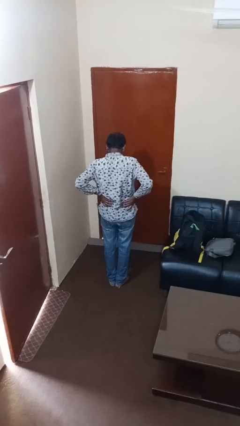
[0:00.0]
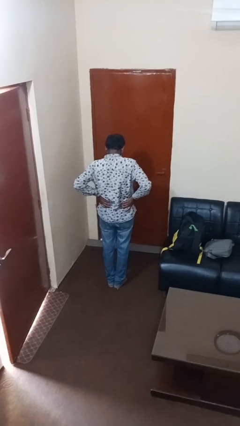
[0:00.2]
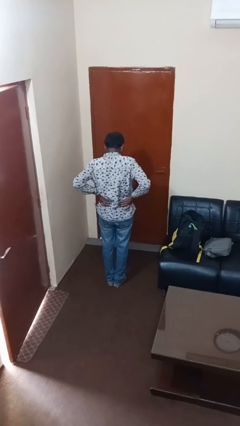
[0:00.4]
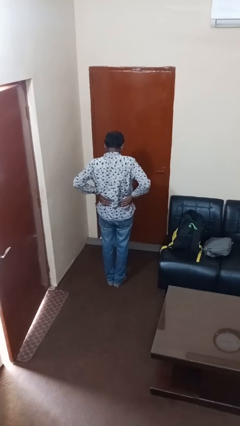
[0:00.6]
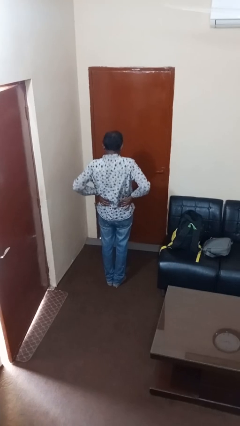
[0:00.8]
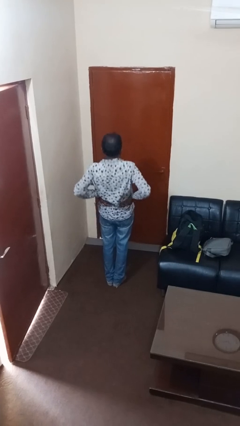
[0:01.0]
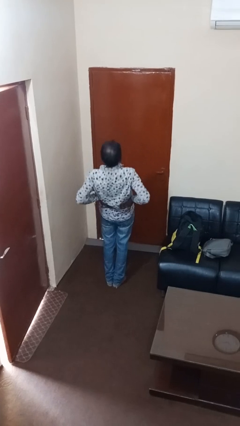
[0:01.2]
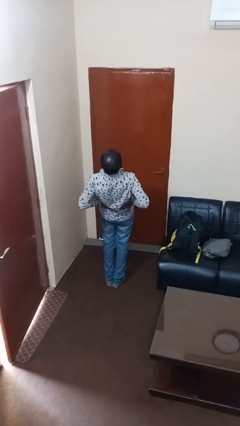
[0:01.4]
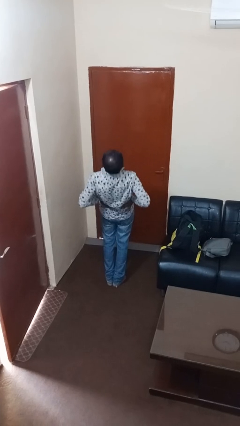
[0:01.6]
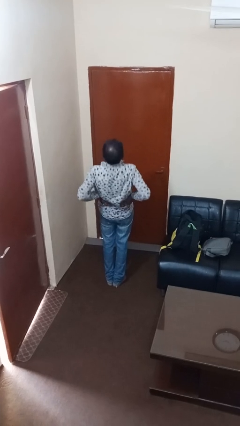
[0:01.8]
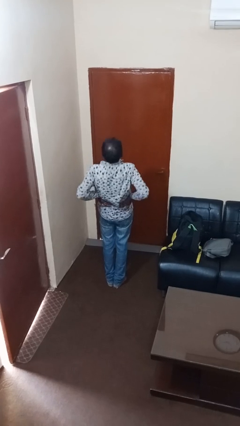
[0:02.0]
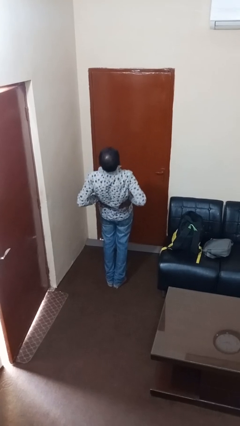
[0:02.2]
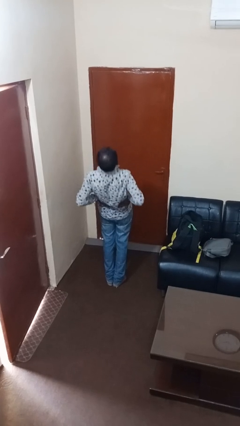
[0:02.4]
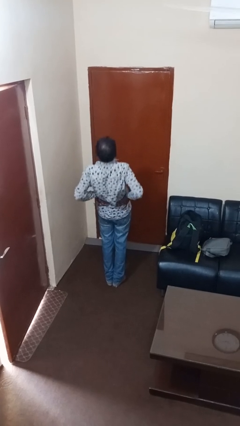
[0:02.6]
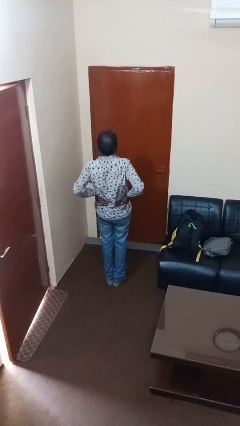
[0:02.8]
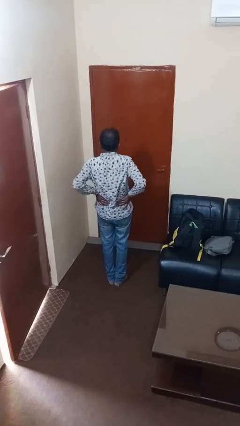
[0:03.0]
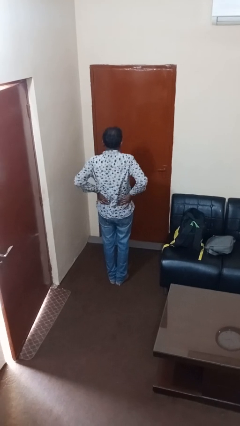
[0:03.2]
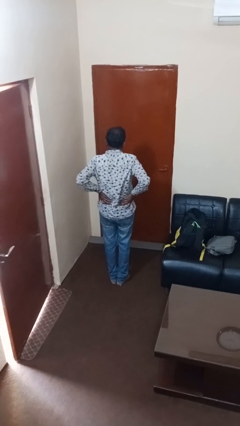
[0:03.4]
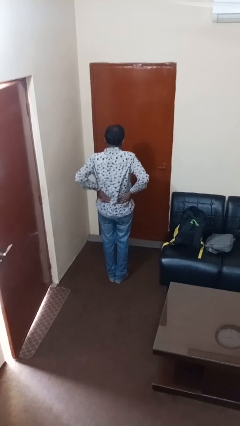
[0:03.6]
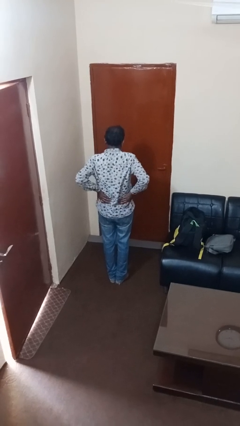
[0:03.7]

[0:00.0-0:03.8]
person stretches back

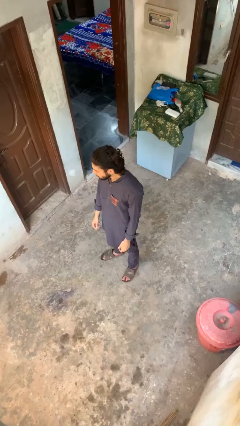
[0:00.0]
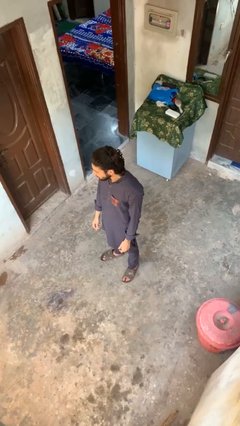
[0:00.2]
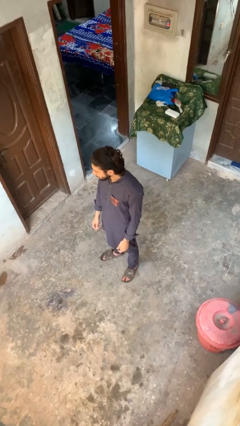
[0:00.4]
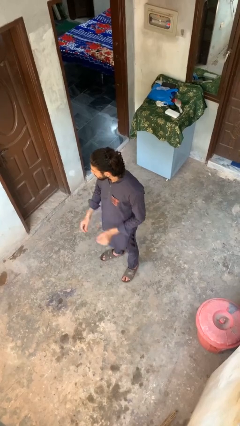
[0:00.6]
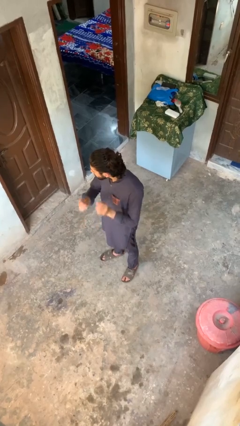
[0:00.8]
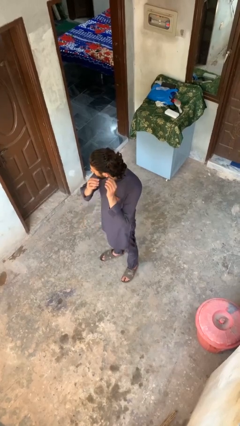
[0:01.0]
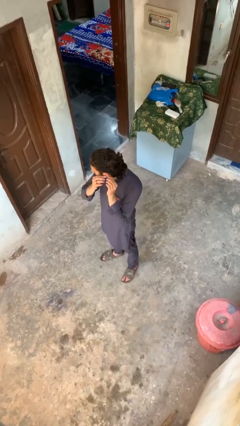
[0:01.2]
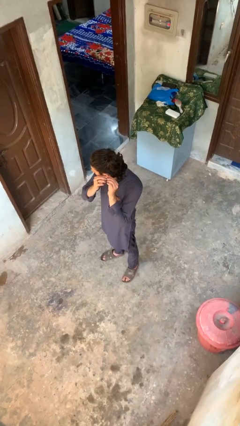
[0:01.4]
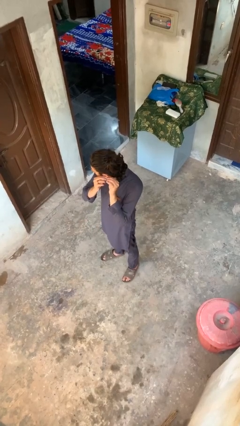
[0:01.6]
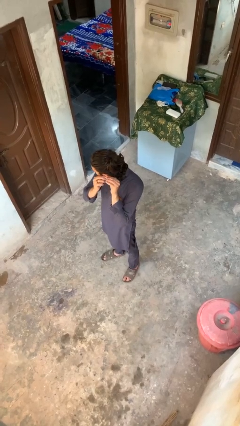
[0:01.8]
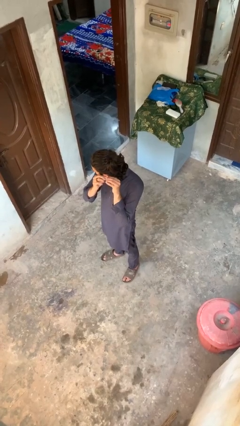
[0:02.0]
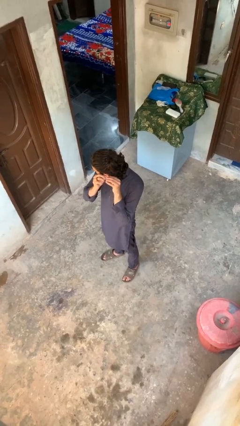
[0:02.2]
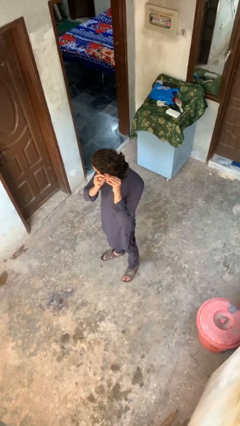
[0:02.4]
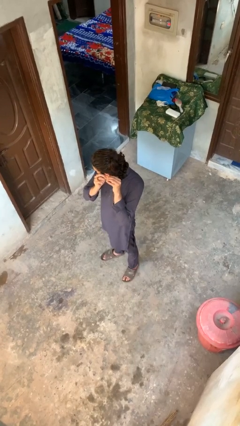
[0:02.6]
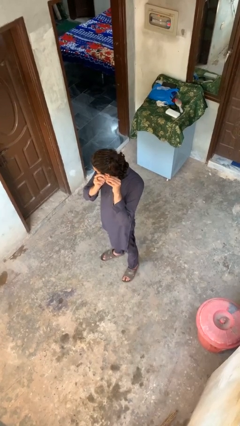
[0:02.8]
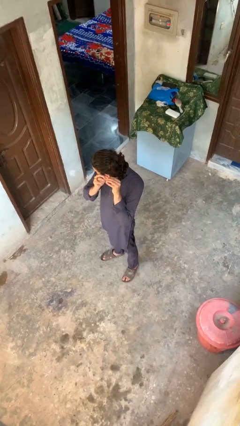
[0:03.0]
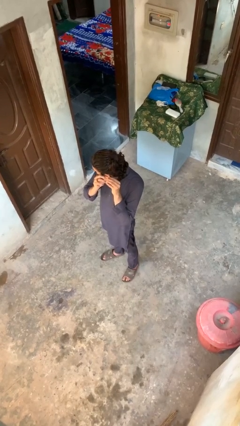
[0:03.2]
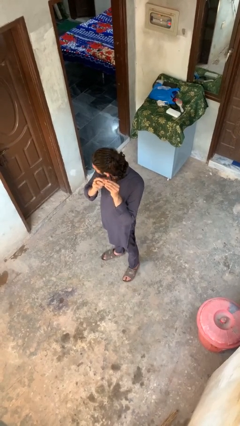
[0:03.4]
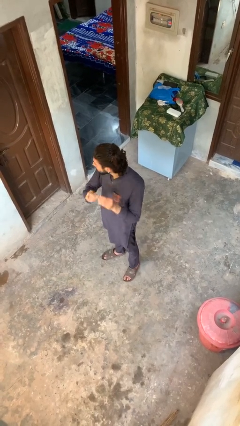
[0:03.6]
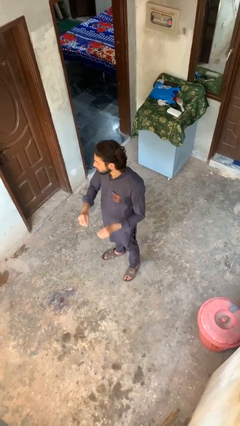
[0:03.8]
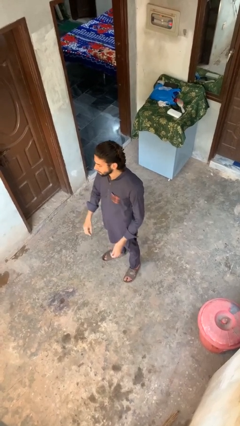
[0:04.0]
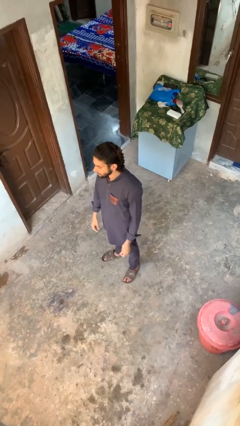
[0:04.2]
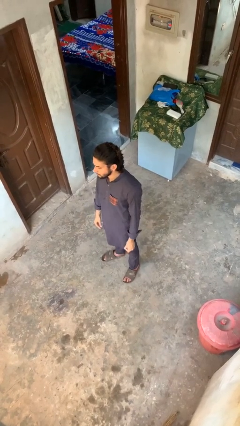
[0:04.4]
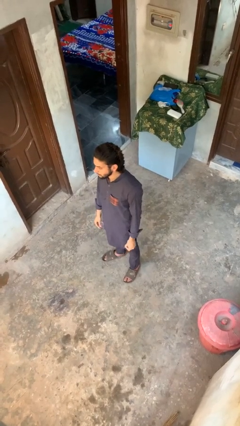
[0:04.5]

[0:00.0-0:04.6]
person takes off earrings

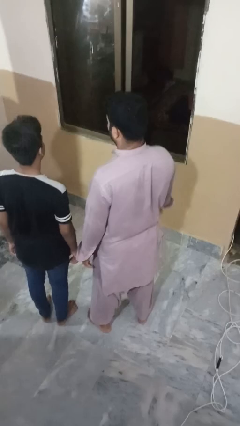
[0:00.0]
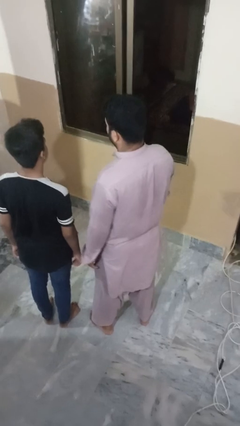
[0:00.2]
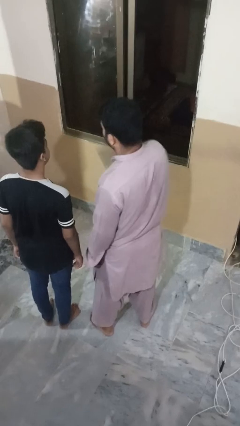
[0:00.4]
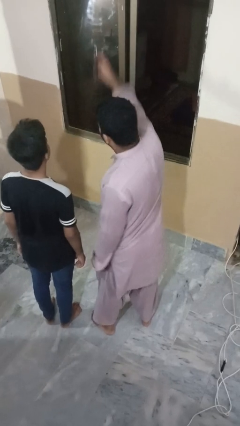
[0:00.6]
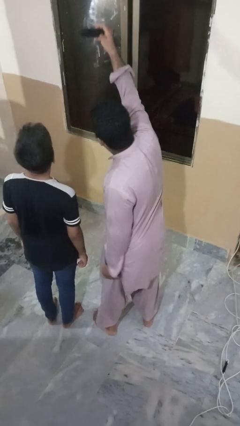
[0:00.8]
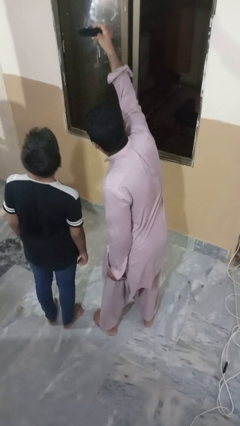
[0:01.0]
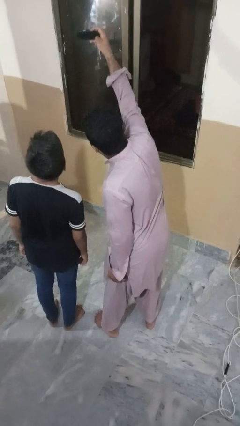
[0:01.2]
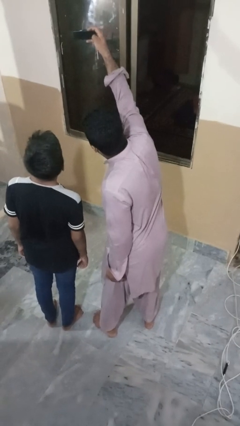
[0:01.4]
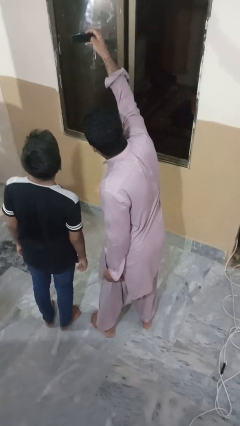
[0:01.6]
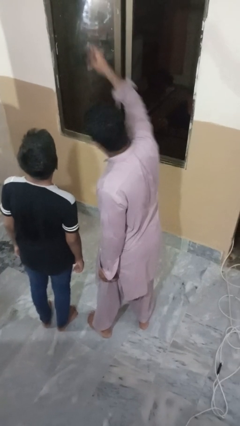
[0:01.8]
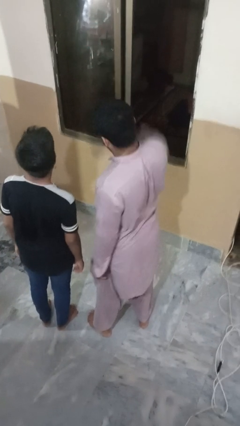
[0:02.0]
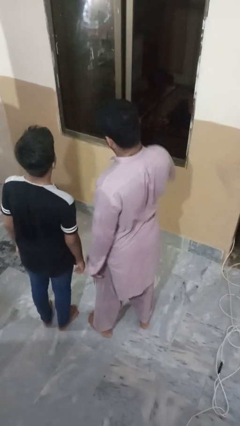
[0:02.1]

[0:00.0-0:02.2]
person takes selfie with person

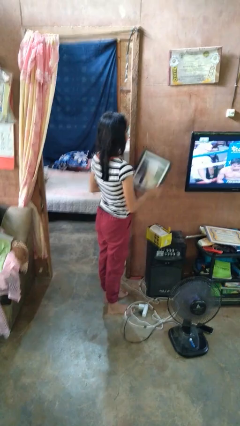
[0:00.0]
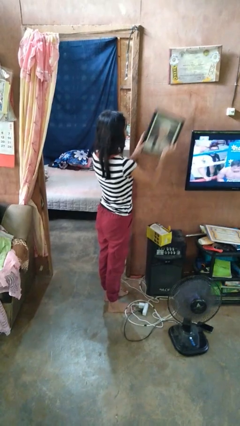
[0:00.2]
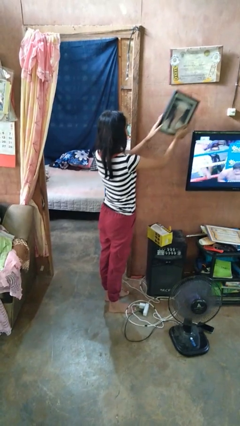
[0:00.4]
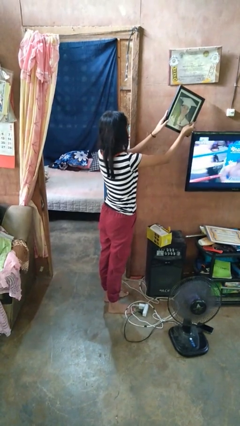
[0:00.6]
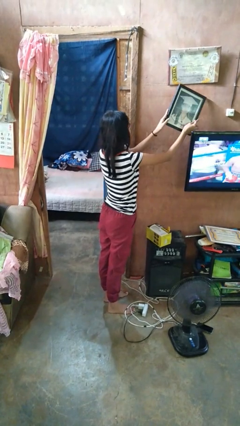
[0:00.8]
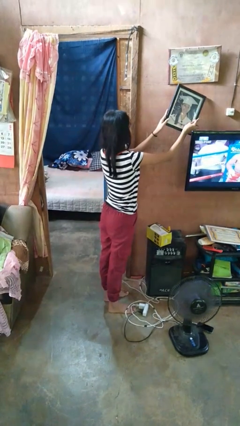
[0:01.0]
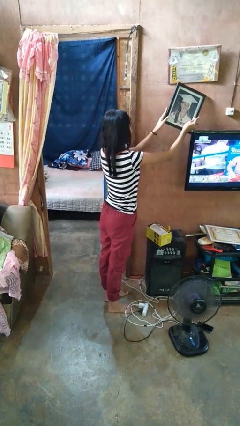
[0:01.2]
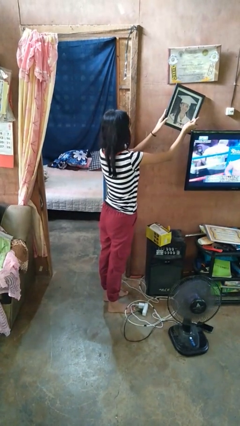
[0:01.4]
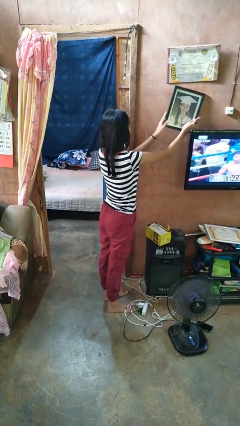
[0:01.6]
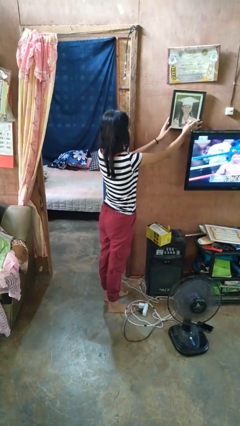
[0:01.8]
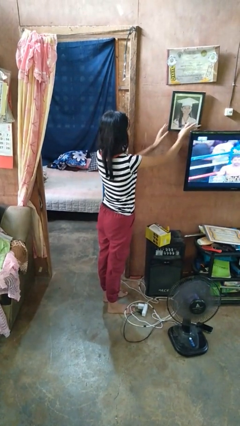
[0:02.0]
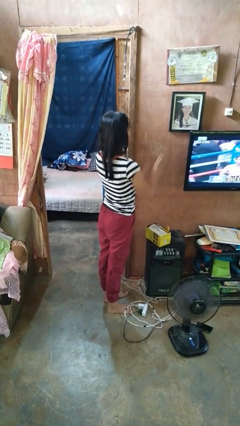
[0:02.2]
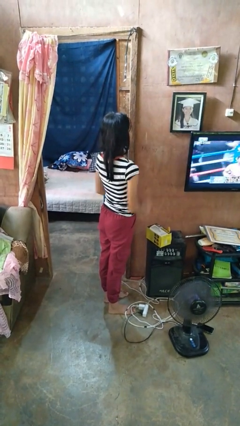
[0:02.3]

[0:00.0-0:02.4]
person puts up picture frame

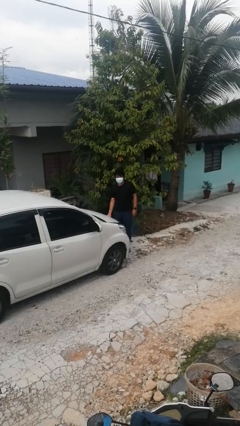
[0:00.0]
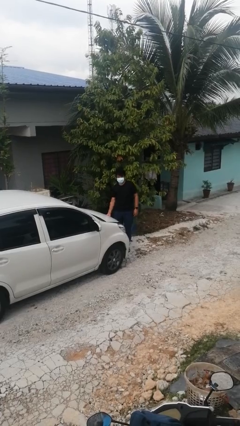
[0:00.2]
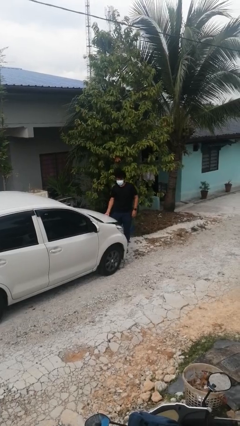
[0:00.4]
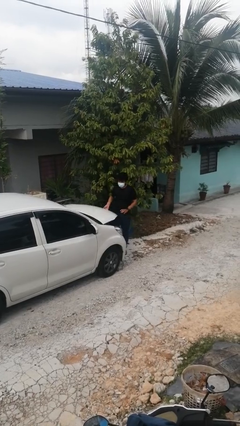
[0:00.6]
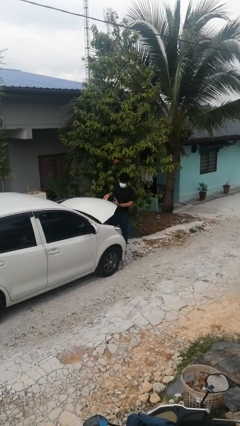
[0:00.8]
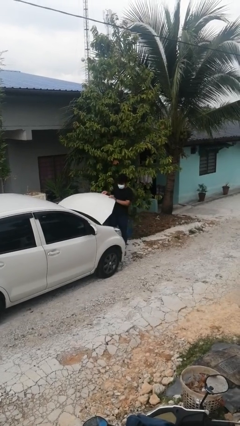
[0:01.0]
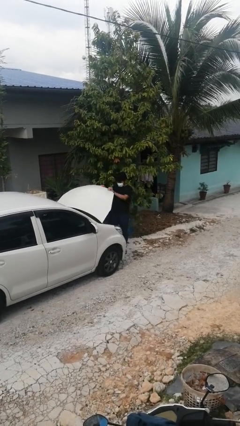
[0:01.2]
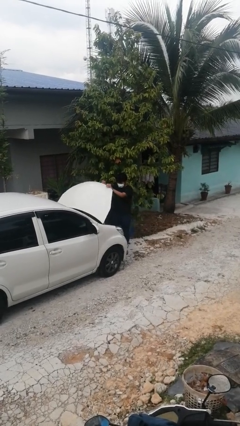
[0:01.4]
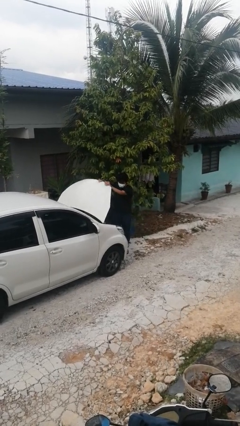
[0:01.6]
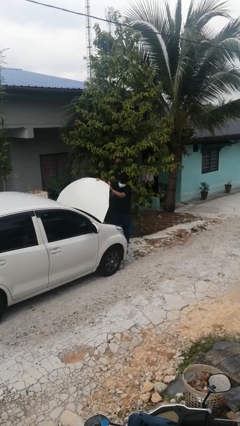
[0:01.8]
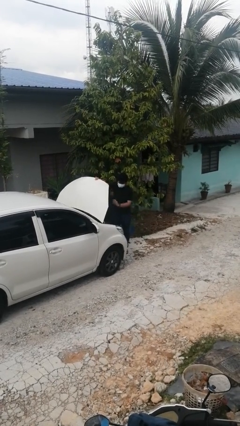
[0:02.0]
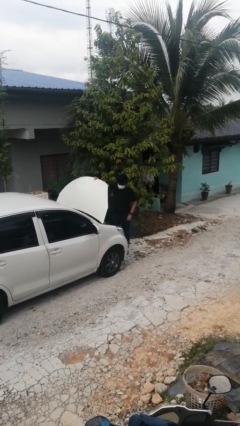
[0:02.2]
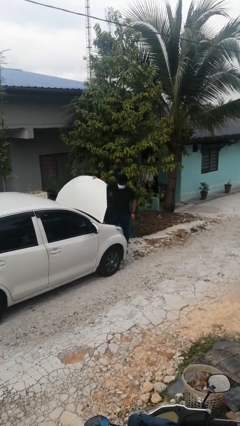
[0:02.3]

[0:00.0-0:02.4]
person opens car hood

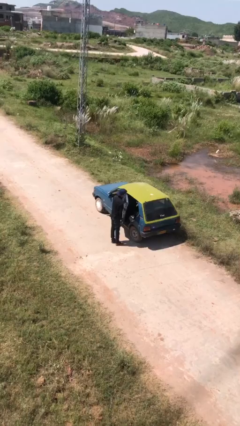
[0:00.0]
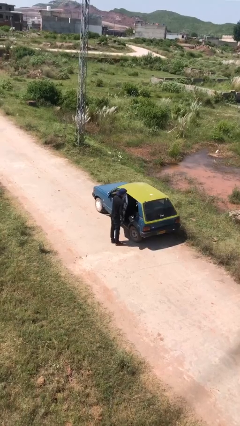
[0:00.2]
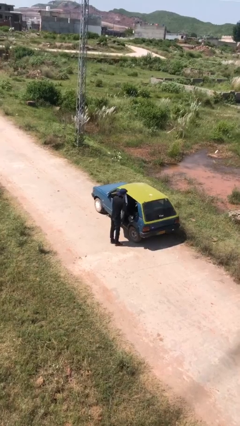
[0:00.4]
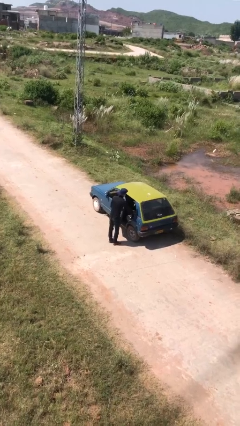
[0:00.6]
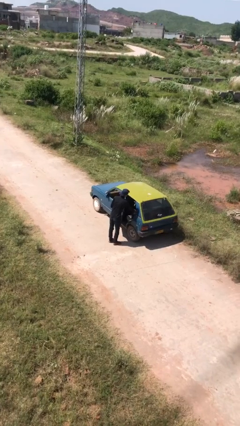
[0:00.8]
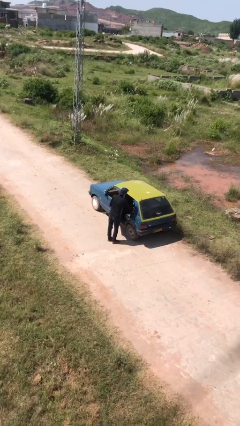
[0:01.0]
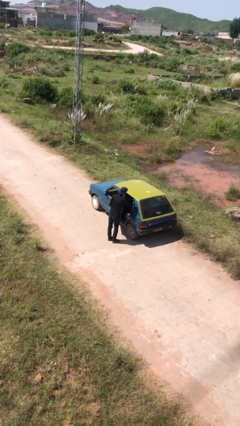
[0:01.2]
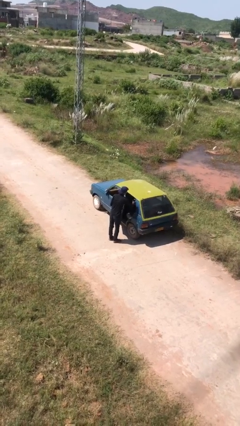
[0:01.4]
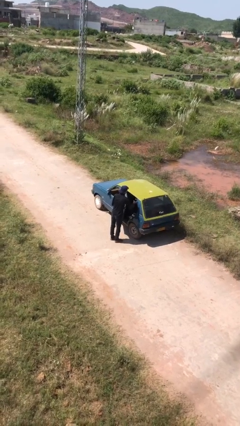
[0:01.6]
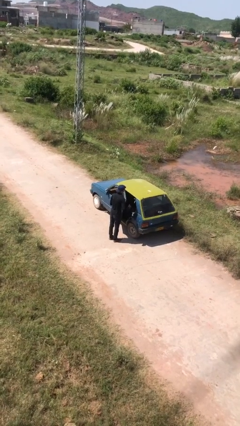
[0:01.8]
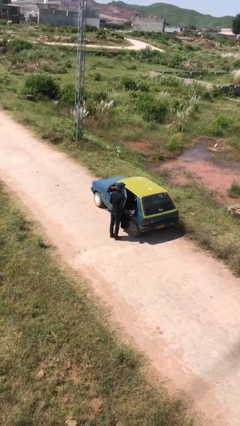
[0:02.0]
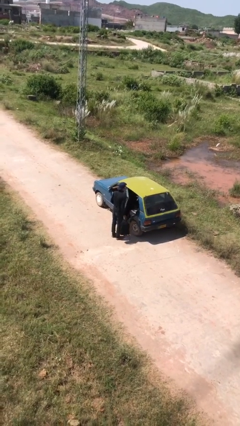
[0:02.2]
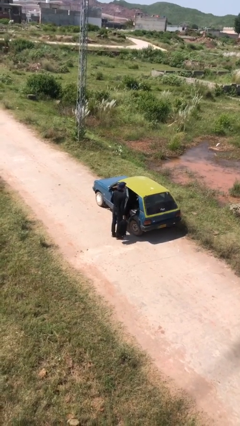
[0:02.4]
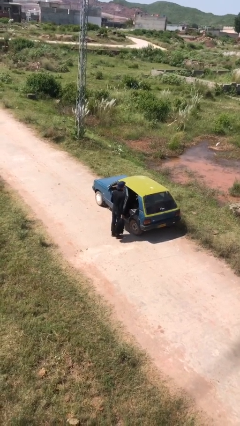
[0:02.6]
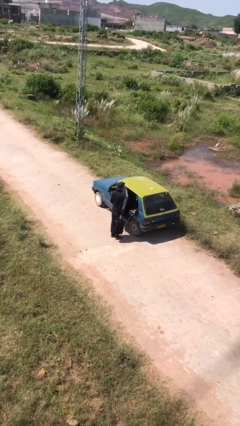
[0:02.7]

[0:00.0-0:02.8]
person unloads car
